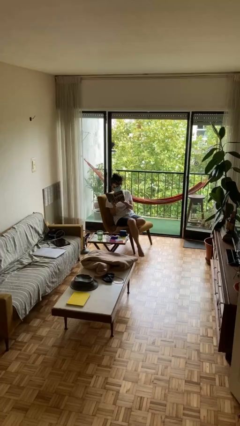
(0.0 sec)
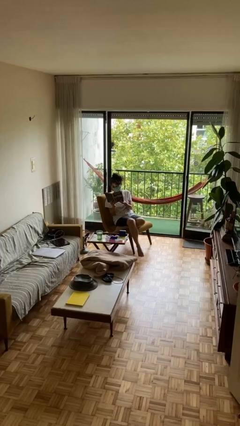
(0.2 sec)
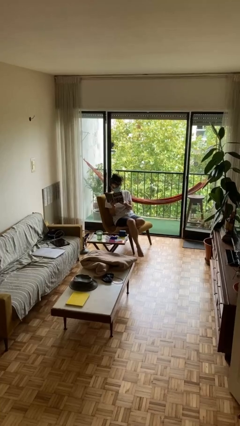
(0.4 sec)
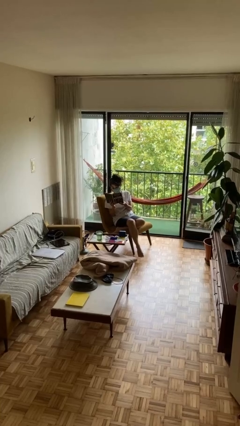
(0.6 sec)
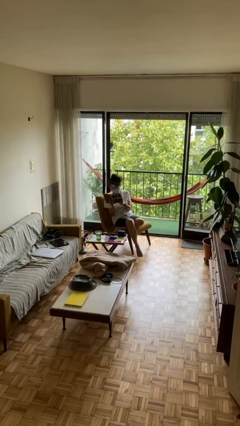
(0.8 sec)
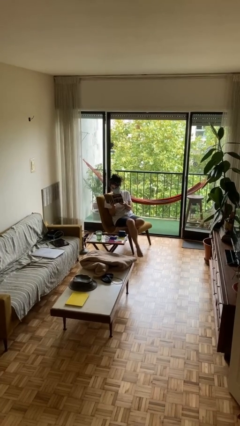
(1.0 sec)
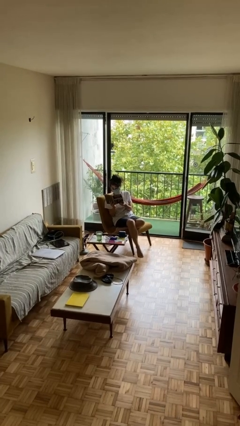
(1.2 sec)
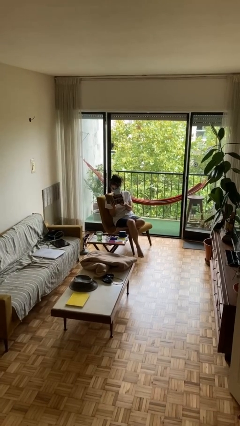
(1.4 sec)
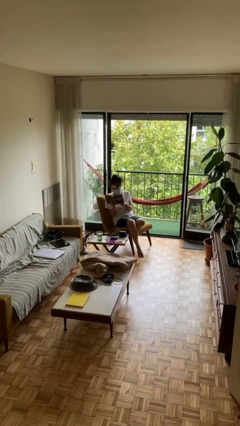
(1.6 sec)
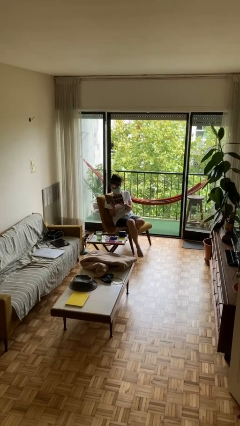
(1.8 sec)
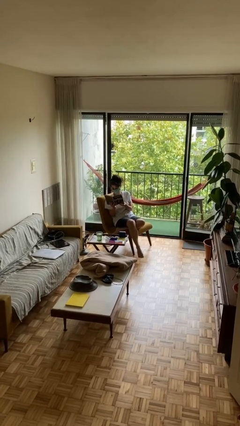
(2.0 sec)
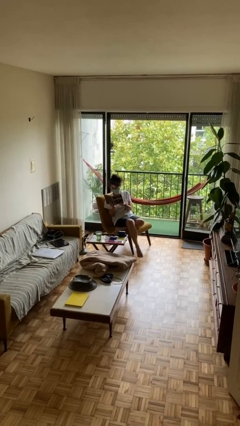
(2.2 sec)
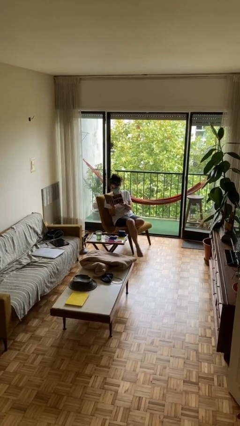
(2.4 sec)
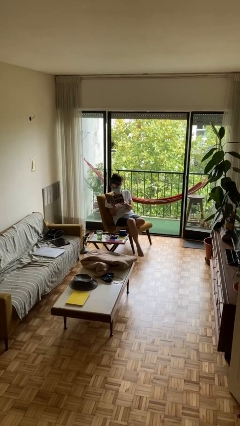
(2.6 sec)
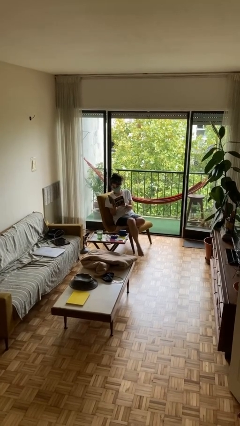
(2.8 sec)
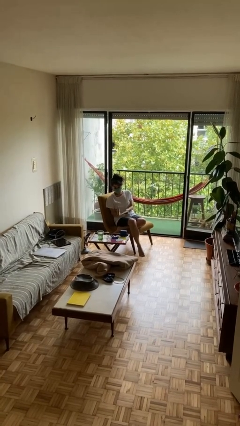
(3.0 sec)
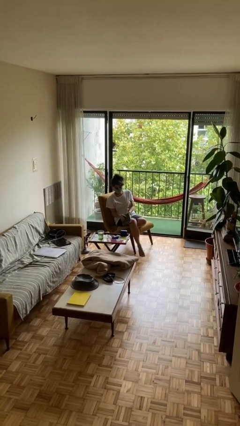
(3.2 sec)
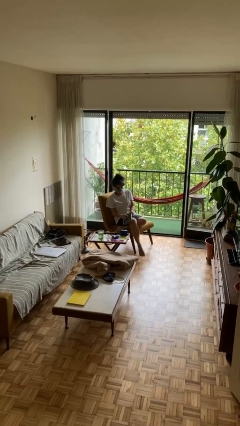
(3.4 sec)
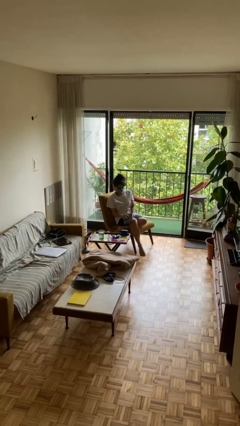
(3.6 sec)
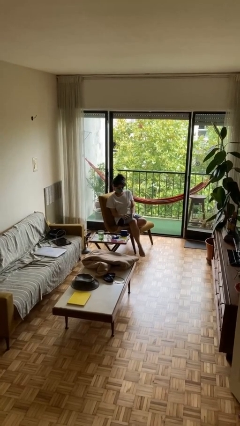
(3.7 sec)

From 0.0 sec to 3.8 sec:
person reads document

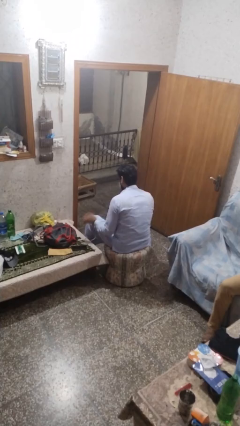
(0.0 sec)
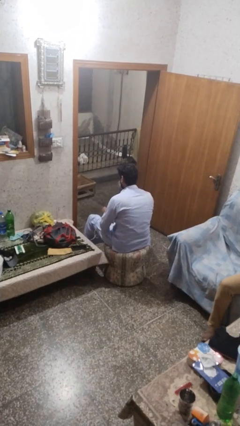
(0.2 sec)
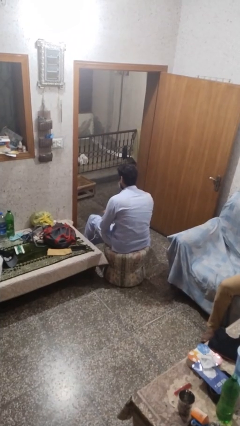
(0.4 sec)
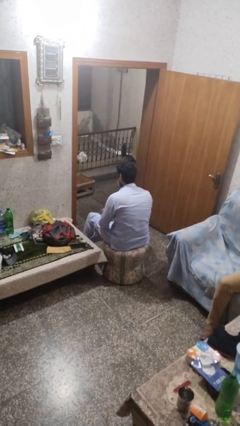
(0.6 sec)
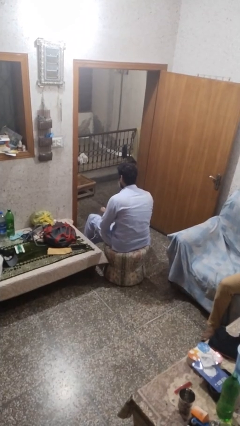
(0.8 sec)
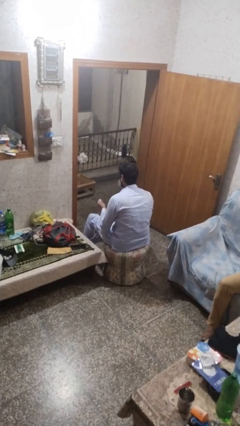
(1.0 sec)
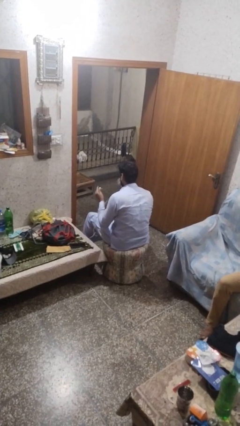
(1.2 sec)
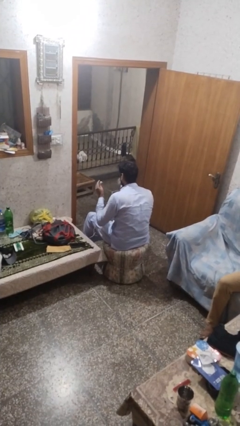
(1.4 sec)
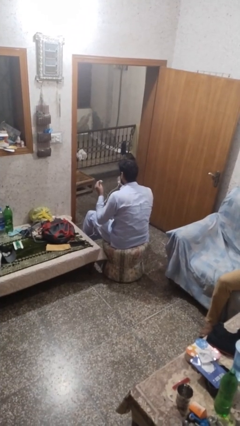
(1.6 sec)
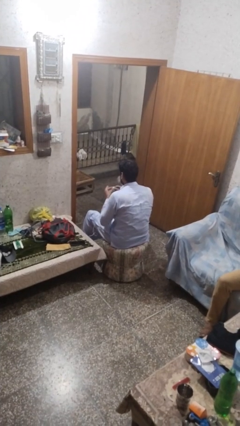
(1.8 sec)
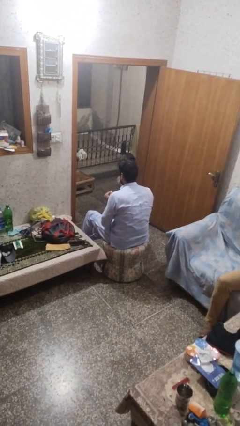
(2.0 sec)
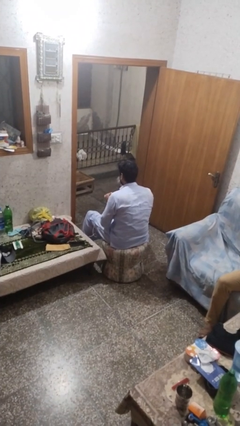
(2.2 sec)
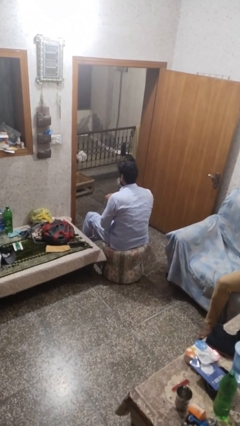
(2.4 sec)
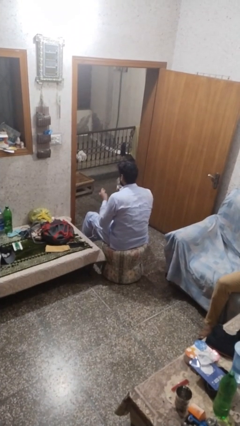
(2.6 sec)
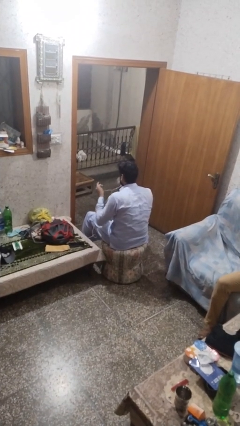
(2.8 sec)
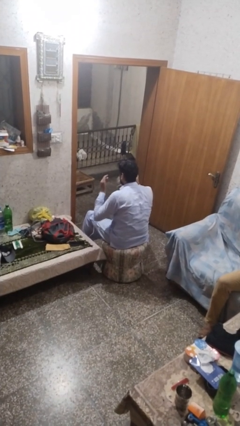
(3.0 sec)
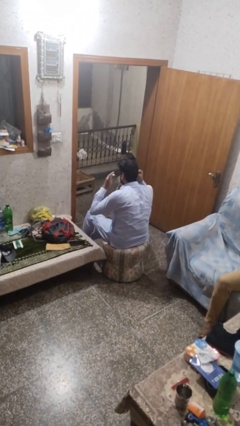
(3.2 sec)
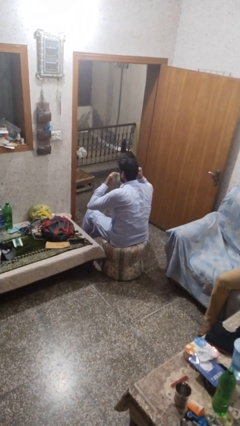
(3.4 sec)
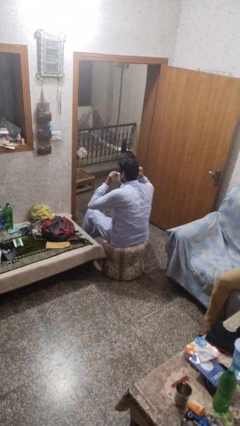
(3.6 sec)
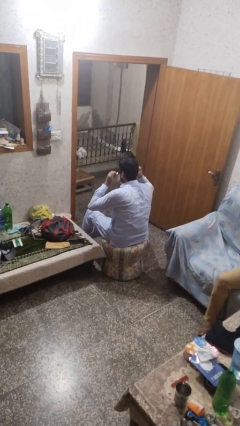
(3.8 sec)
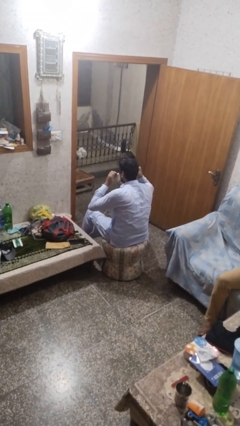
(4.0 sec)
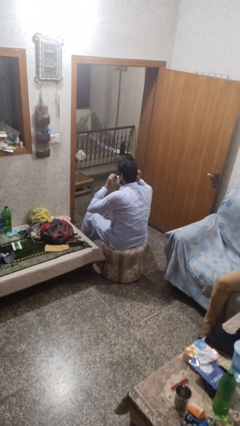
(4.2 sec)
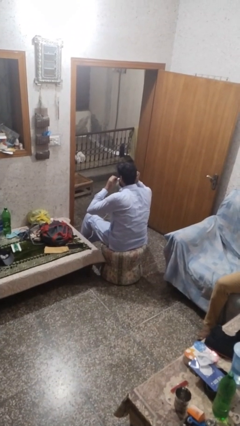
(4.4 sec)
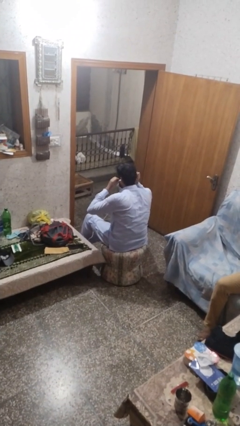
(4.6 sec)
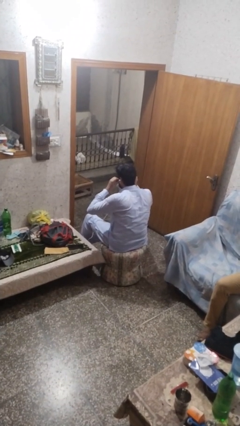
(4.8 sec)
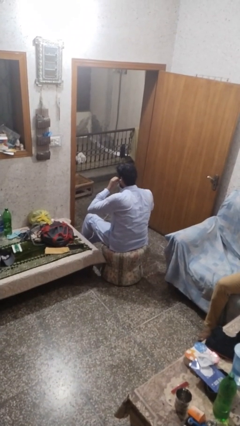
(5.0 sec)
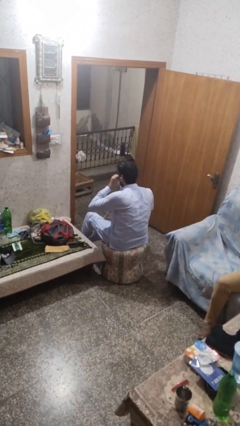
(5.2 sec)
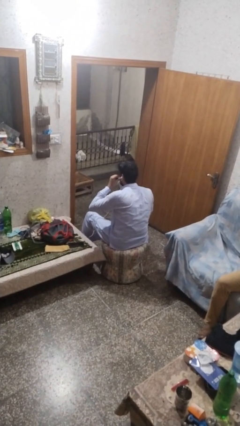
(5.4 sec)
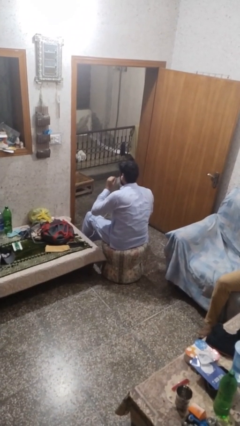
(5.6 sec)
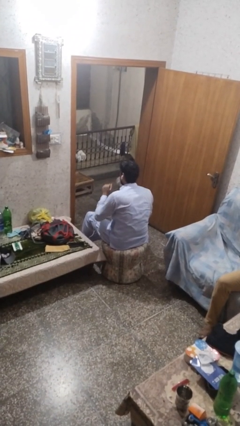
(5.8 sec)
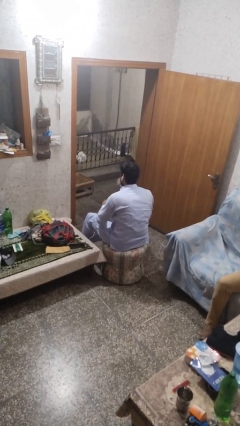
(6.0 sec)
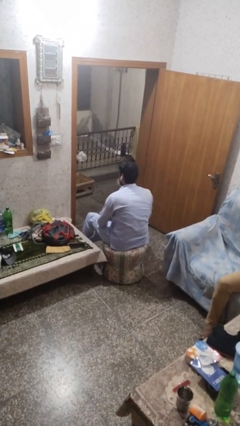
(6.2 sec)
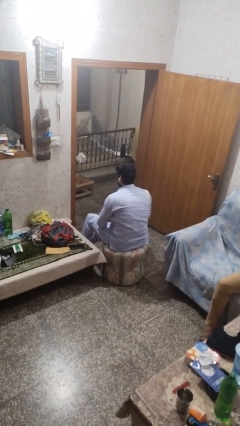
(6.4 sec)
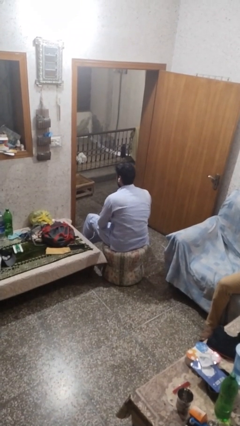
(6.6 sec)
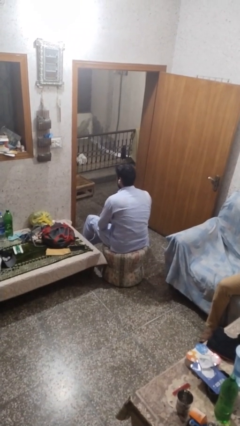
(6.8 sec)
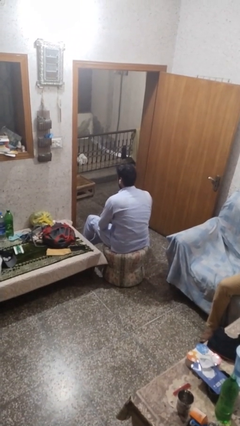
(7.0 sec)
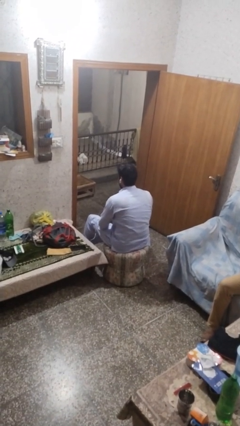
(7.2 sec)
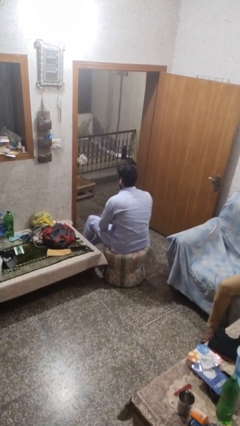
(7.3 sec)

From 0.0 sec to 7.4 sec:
person puts on headphones

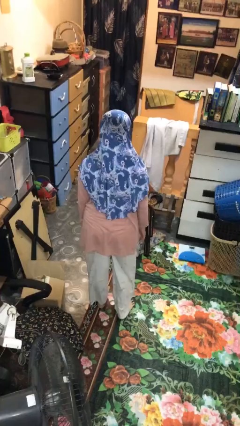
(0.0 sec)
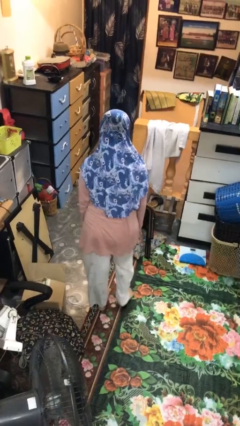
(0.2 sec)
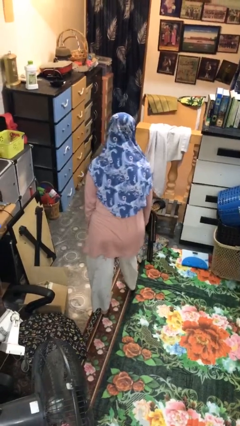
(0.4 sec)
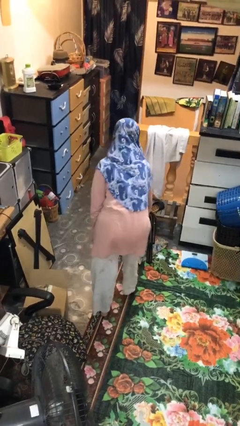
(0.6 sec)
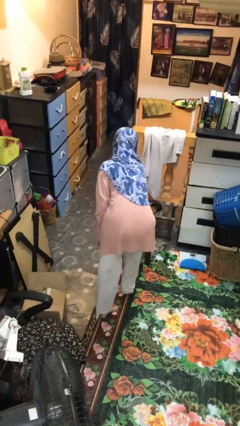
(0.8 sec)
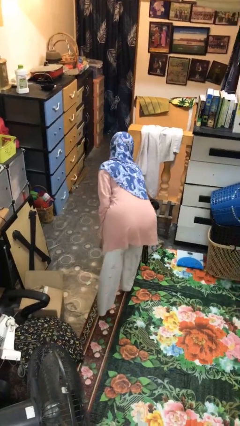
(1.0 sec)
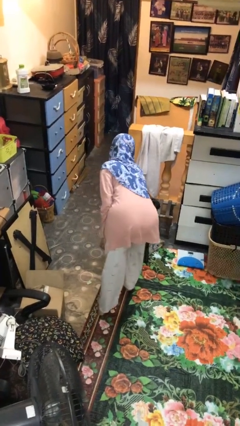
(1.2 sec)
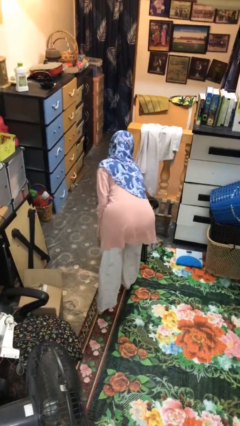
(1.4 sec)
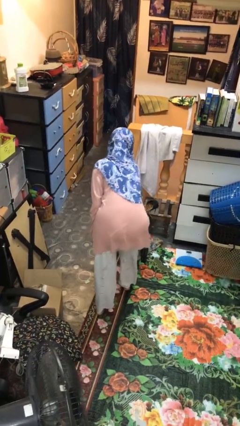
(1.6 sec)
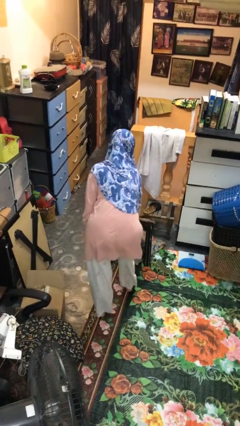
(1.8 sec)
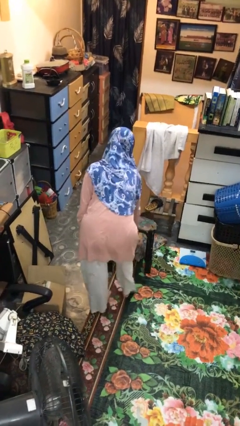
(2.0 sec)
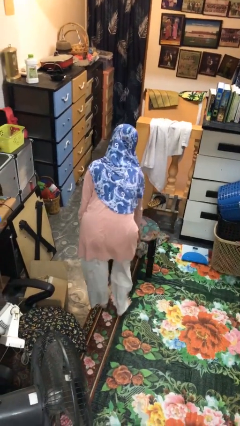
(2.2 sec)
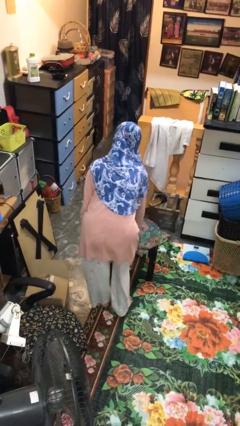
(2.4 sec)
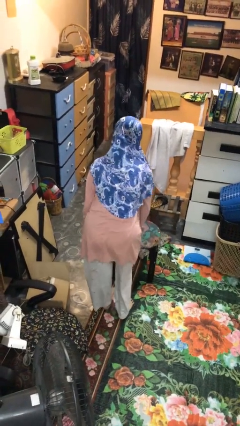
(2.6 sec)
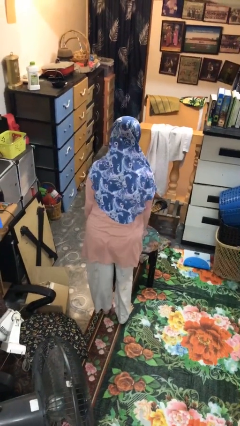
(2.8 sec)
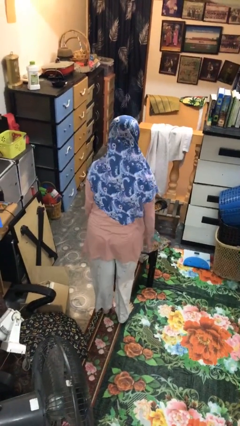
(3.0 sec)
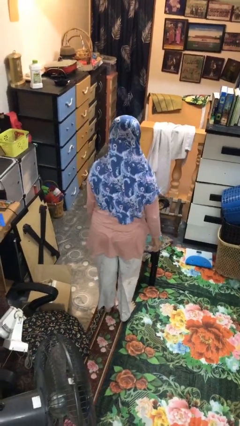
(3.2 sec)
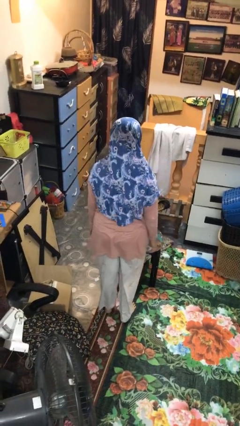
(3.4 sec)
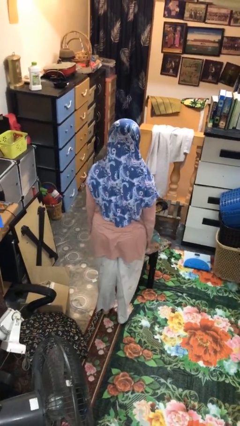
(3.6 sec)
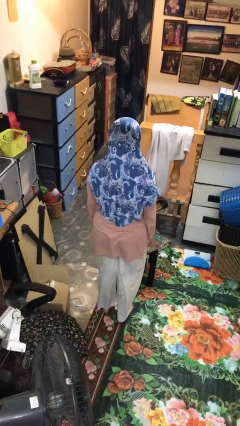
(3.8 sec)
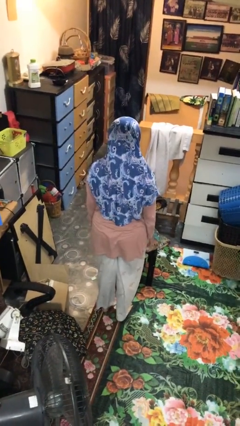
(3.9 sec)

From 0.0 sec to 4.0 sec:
person sets upright furniture

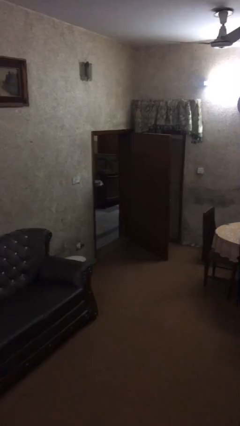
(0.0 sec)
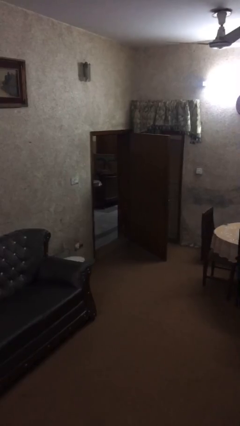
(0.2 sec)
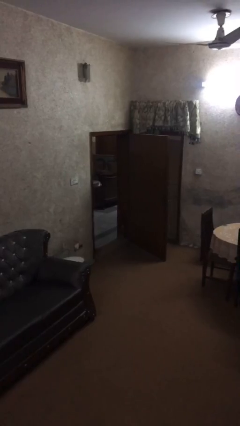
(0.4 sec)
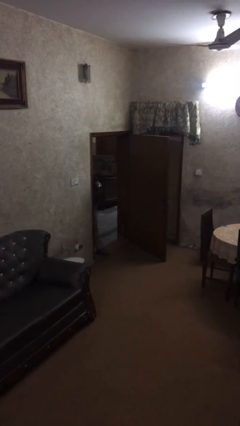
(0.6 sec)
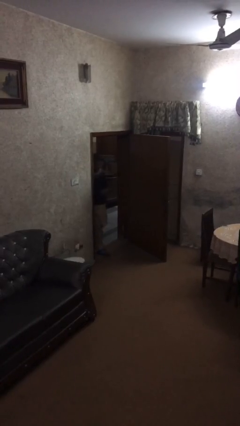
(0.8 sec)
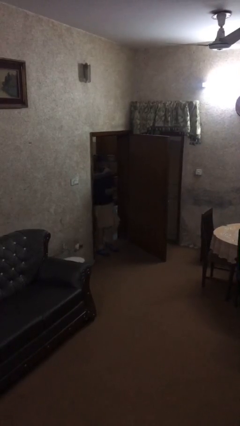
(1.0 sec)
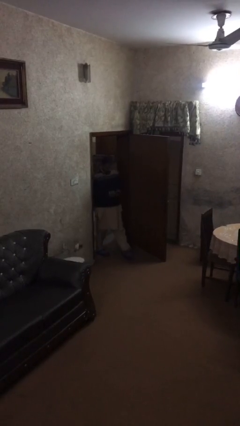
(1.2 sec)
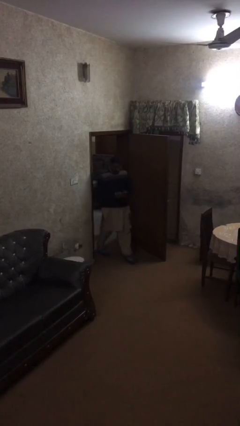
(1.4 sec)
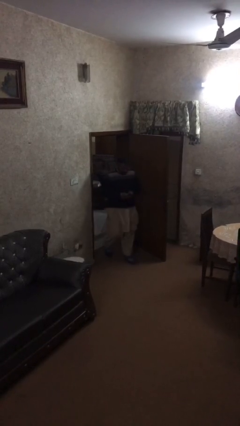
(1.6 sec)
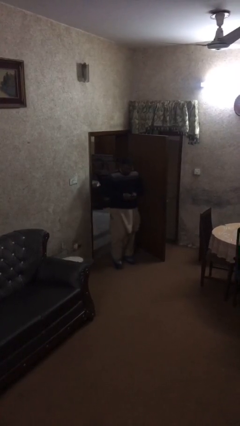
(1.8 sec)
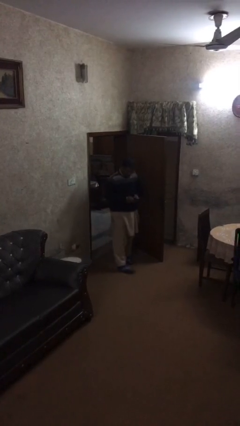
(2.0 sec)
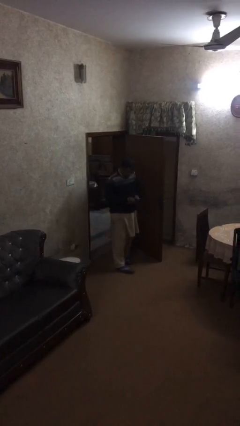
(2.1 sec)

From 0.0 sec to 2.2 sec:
person enters scene through structure

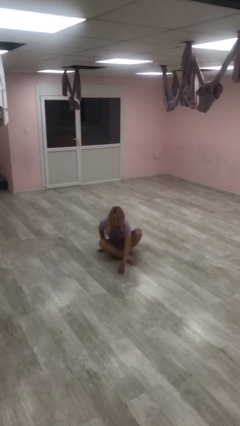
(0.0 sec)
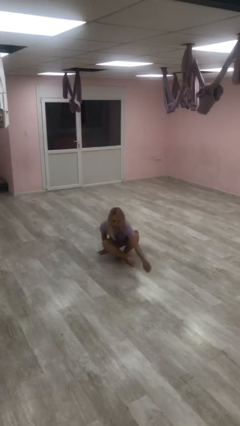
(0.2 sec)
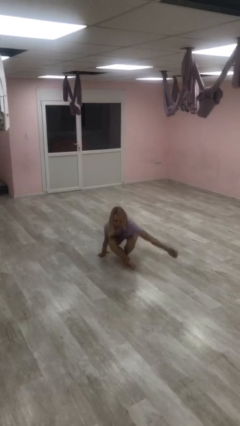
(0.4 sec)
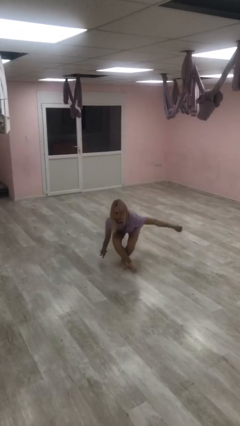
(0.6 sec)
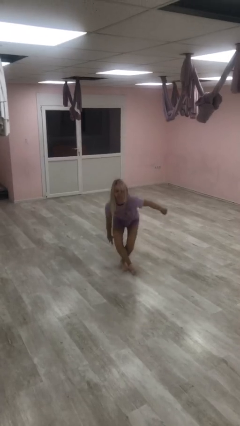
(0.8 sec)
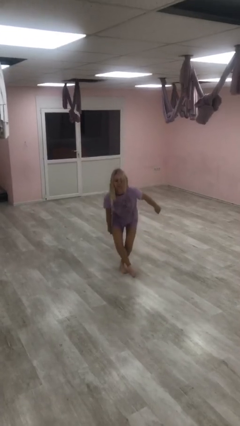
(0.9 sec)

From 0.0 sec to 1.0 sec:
person stands up from floor
